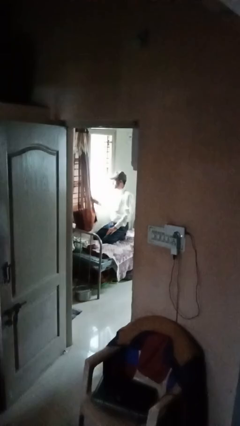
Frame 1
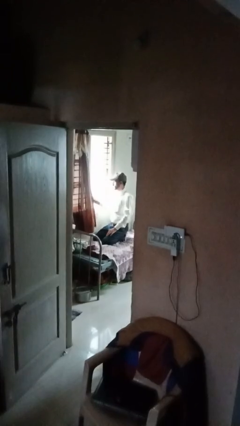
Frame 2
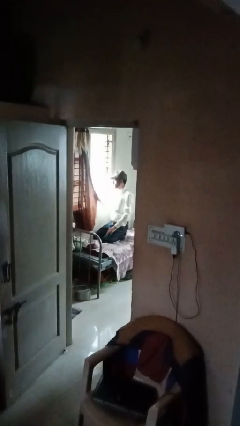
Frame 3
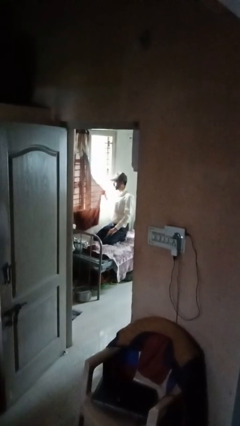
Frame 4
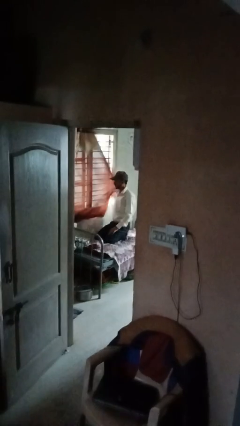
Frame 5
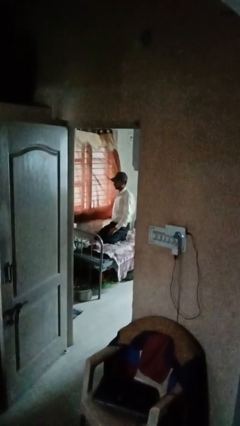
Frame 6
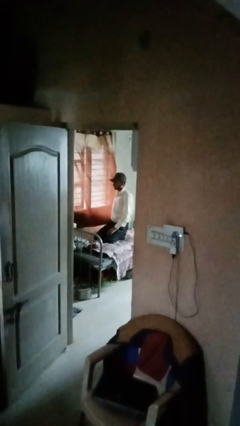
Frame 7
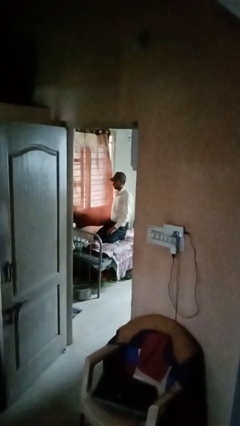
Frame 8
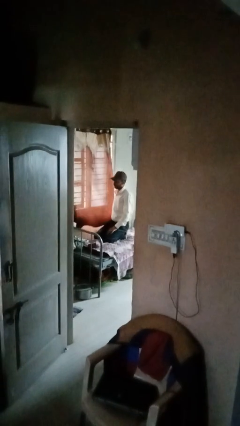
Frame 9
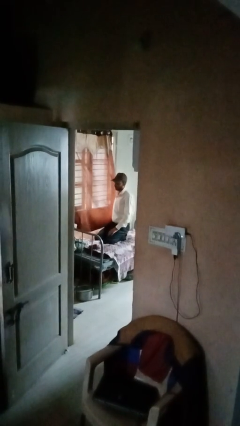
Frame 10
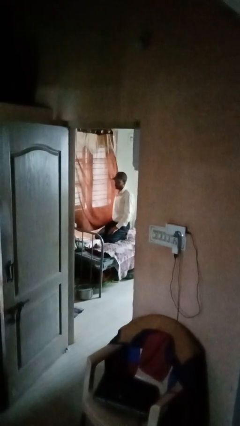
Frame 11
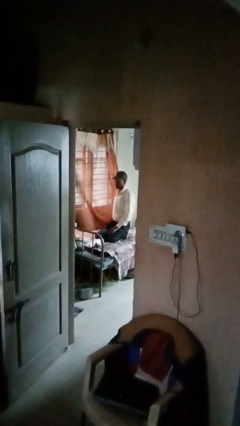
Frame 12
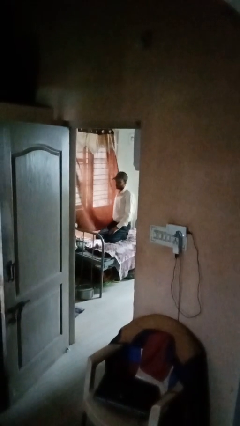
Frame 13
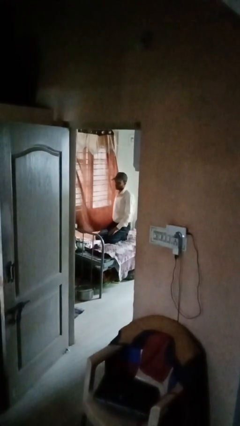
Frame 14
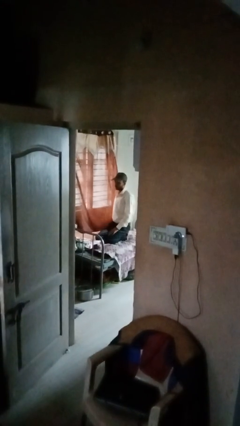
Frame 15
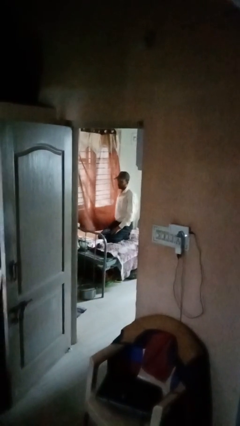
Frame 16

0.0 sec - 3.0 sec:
person closes curtains

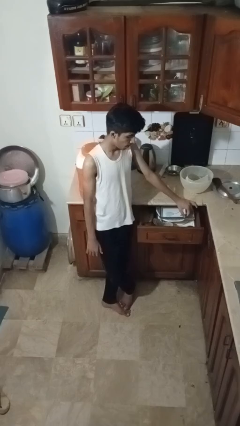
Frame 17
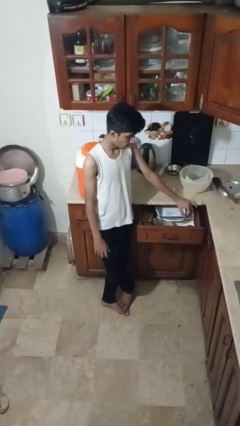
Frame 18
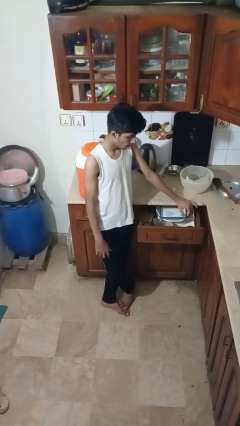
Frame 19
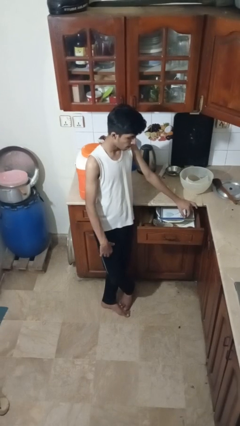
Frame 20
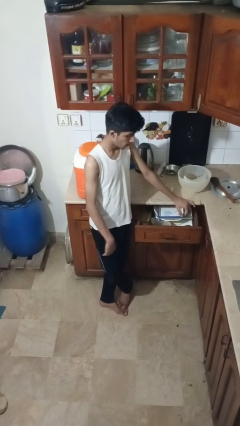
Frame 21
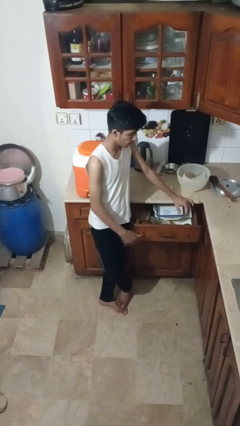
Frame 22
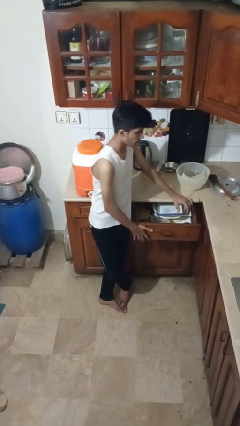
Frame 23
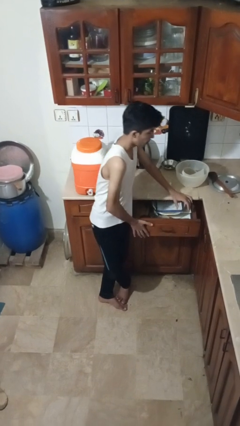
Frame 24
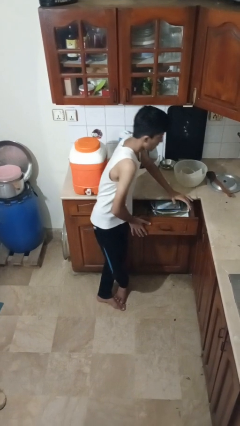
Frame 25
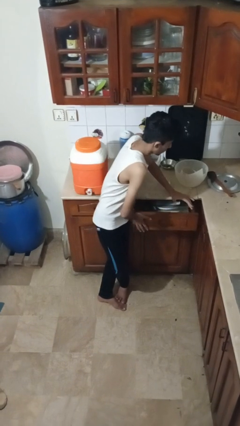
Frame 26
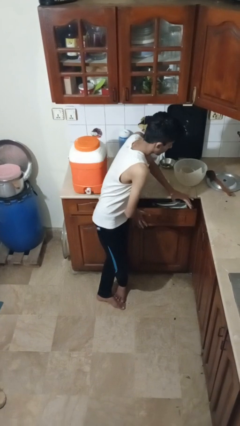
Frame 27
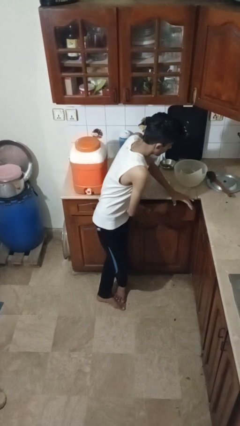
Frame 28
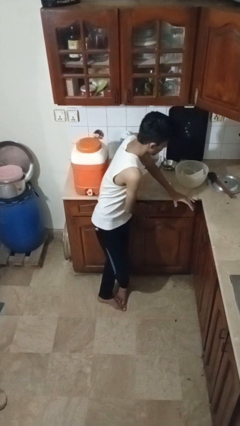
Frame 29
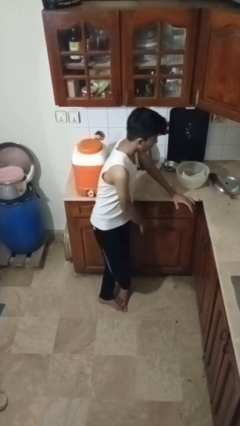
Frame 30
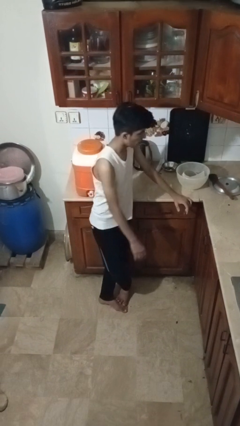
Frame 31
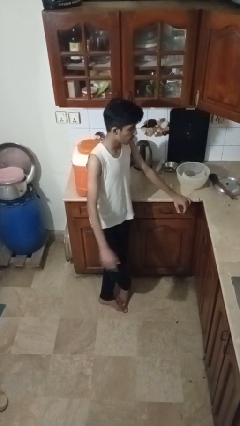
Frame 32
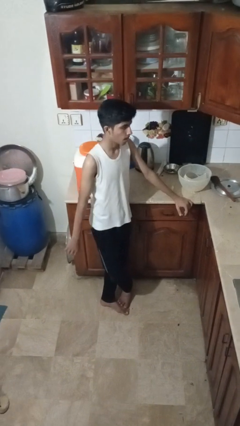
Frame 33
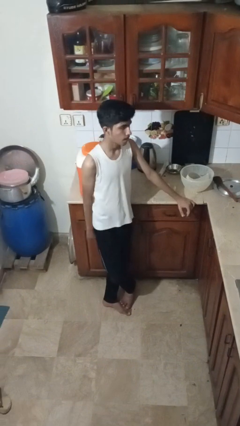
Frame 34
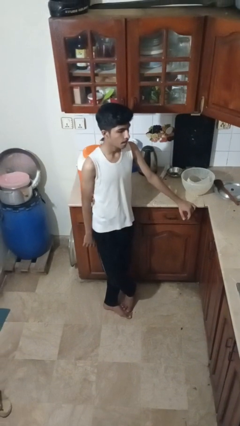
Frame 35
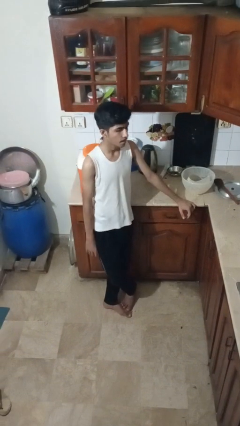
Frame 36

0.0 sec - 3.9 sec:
person closes kitchen drawer

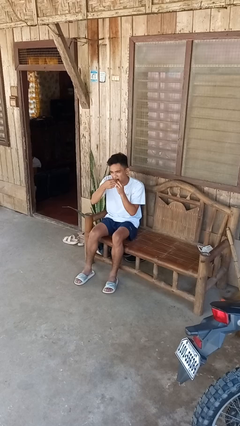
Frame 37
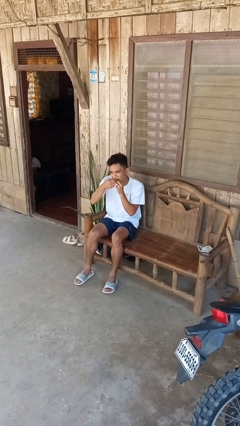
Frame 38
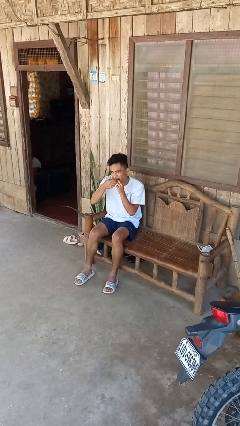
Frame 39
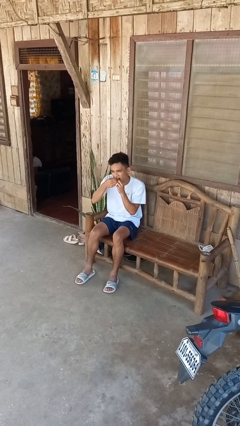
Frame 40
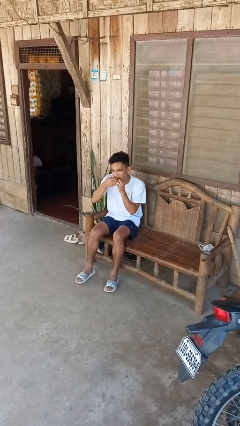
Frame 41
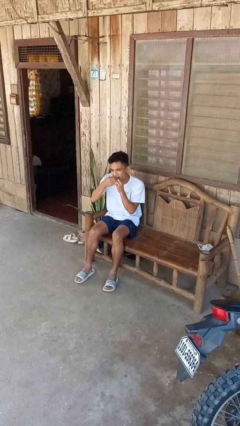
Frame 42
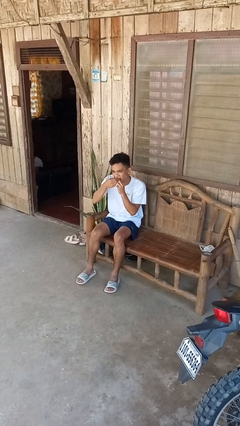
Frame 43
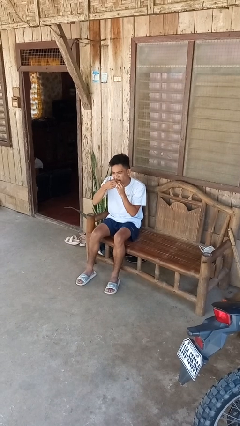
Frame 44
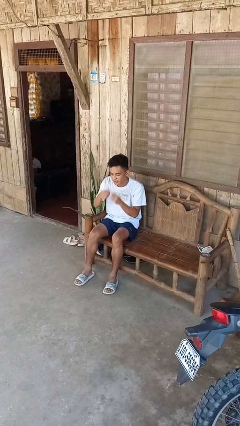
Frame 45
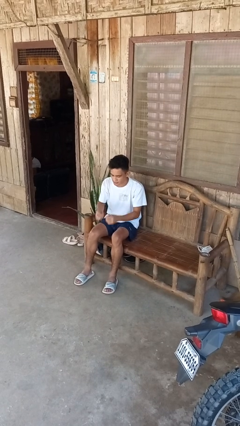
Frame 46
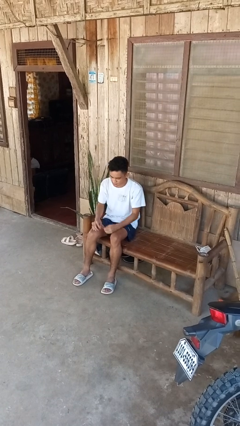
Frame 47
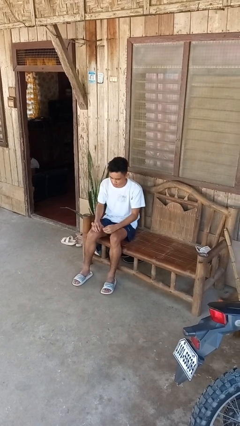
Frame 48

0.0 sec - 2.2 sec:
person flosses

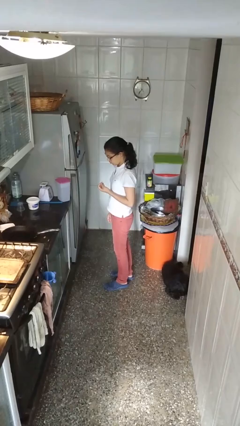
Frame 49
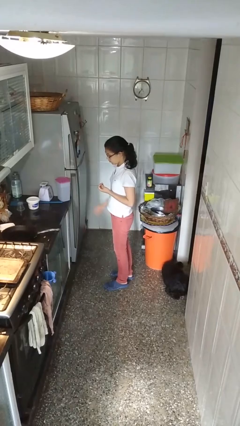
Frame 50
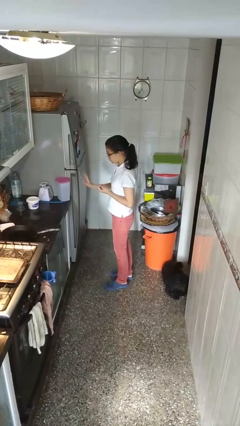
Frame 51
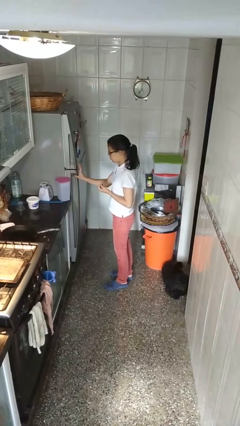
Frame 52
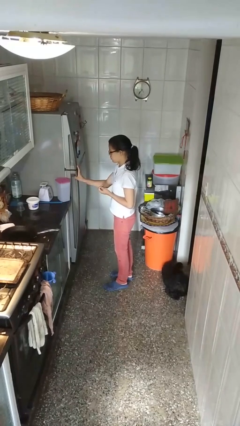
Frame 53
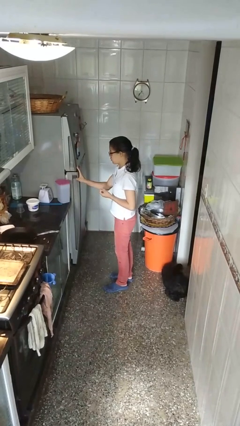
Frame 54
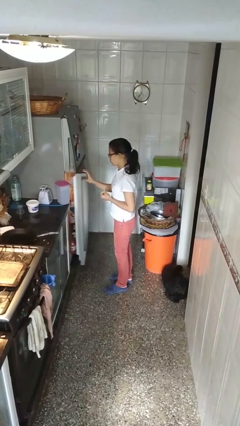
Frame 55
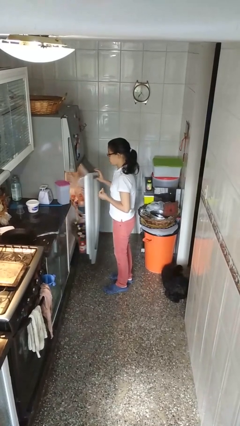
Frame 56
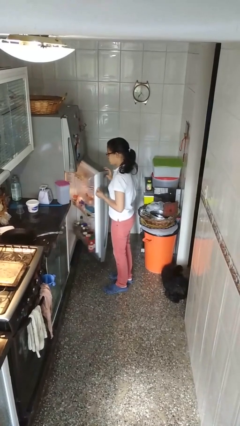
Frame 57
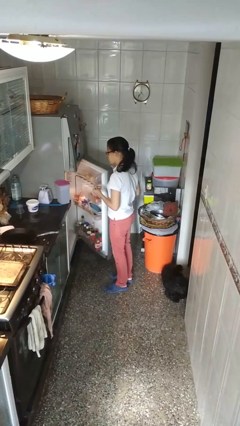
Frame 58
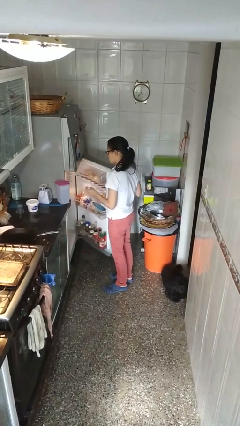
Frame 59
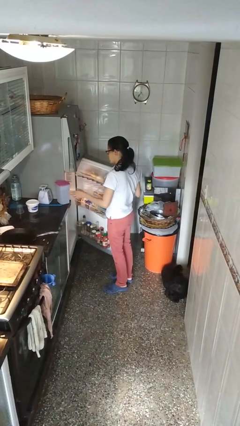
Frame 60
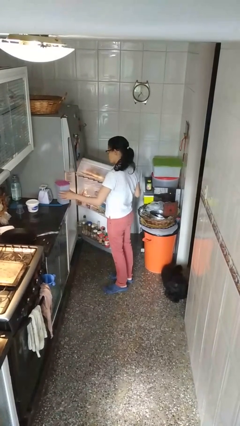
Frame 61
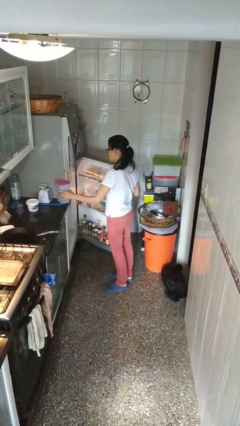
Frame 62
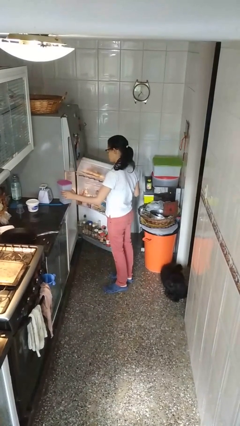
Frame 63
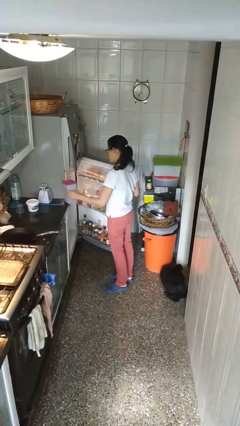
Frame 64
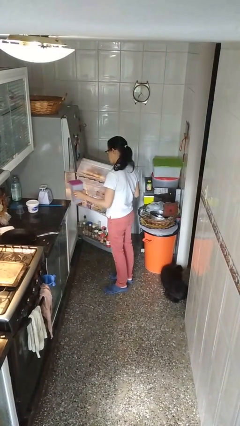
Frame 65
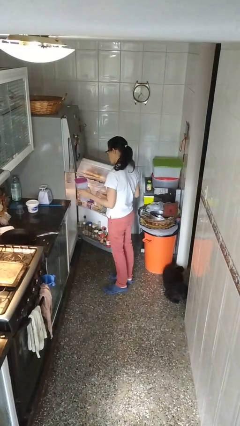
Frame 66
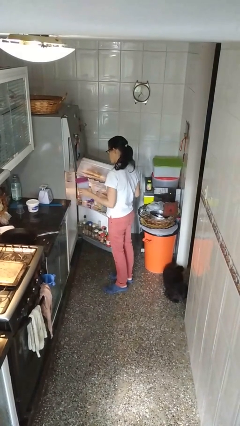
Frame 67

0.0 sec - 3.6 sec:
person opens refrigerator

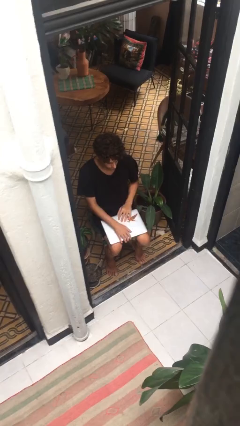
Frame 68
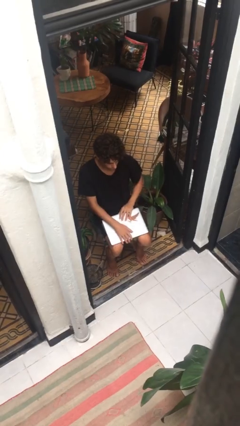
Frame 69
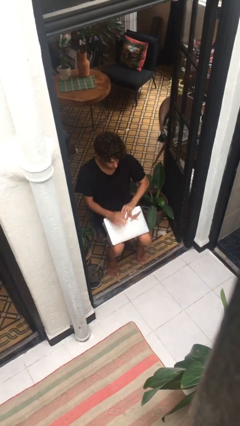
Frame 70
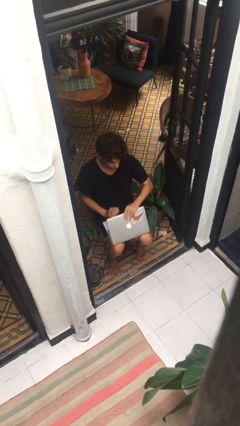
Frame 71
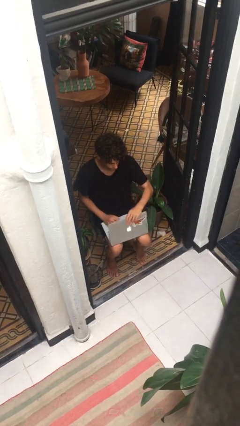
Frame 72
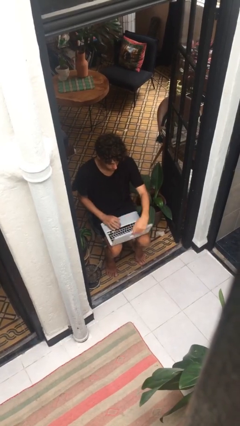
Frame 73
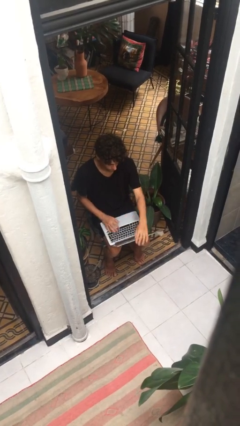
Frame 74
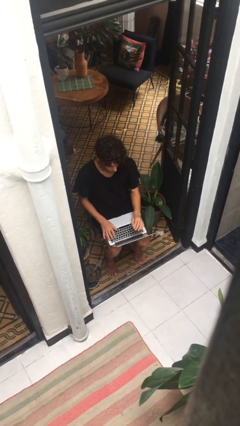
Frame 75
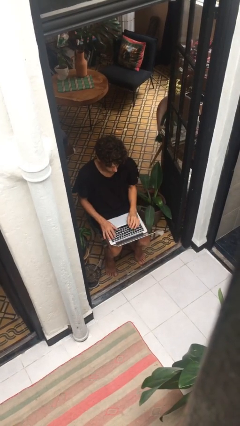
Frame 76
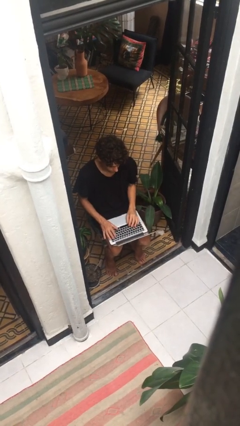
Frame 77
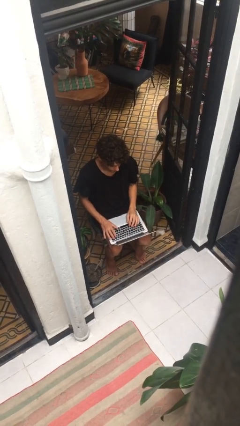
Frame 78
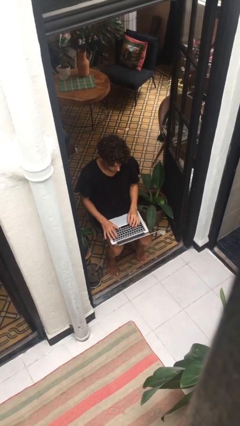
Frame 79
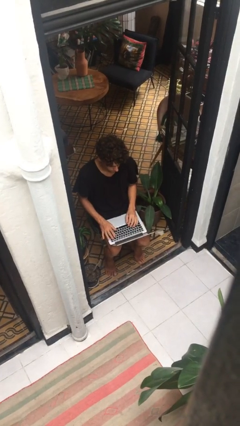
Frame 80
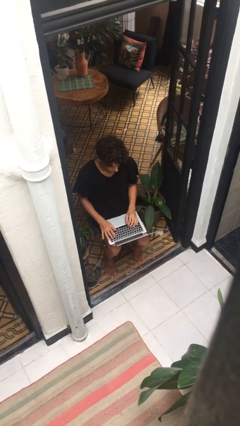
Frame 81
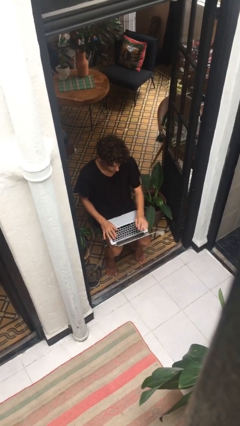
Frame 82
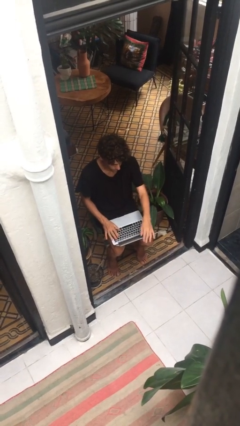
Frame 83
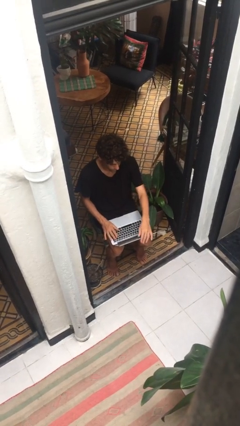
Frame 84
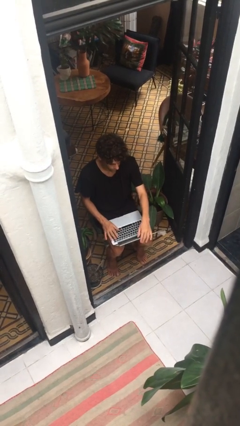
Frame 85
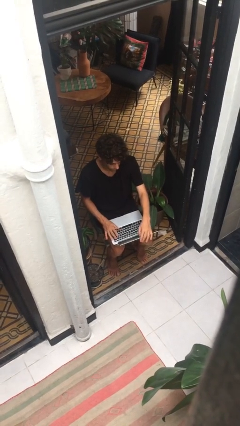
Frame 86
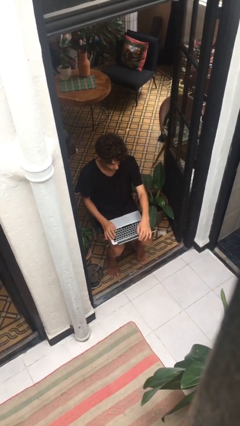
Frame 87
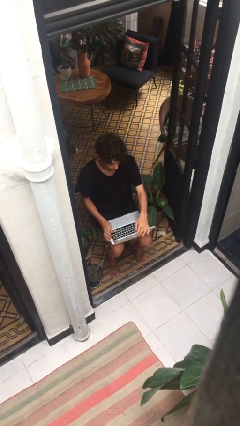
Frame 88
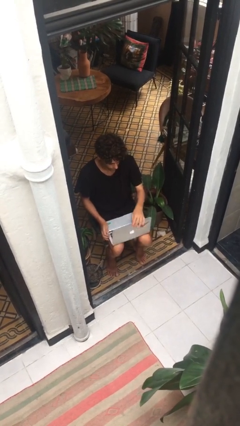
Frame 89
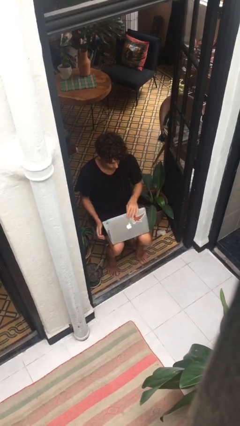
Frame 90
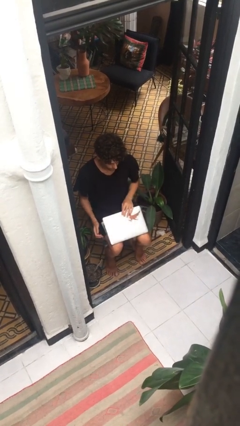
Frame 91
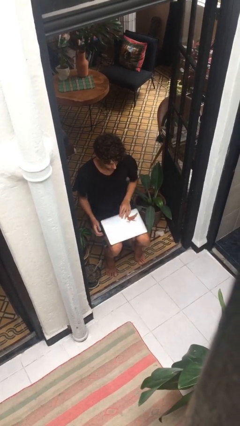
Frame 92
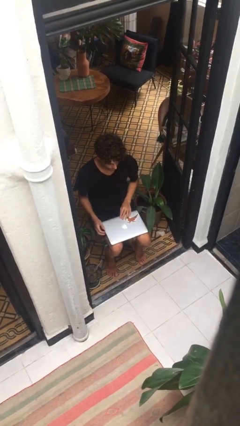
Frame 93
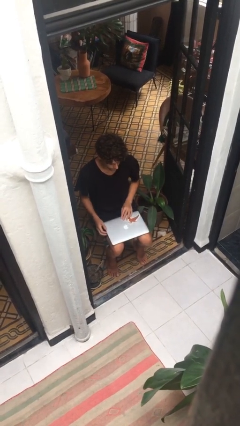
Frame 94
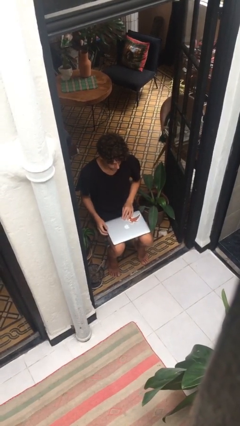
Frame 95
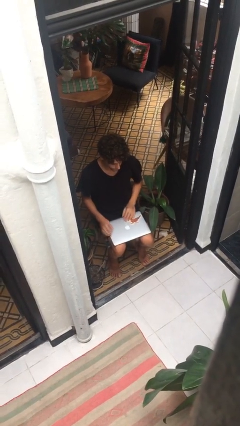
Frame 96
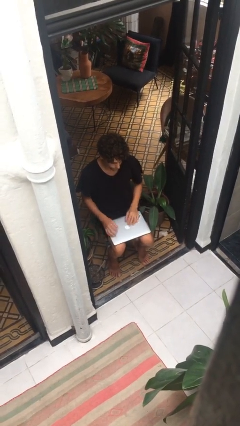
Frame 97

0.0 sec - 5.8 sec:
person interacts with laptop
